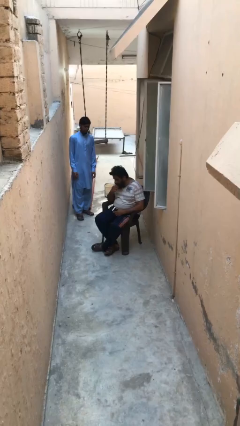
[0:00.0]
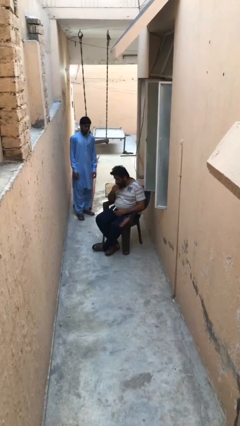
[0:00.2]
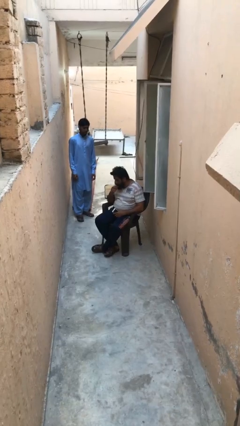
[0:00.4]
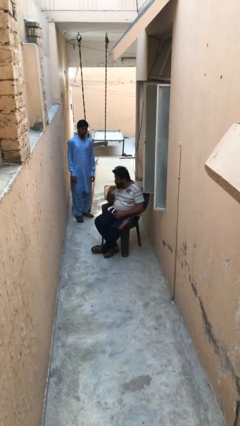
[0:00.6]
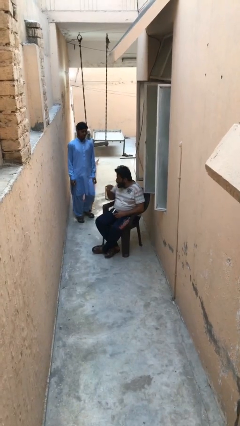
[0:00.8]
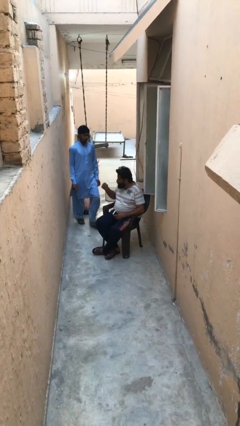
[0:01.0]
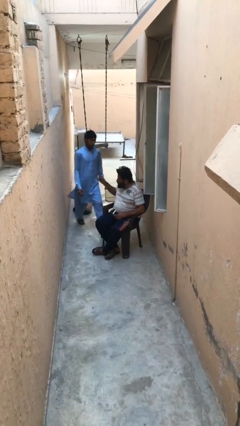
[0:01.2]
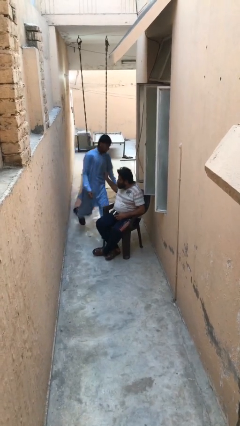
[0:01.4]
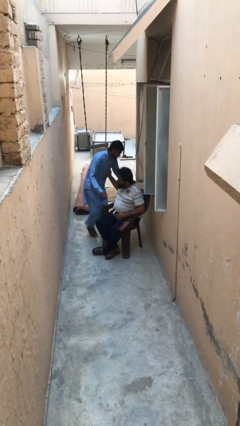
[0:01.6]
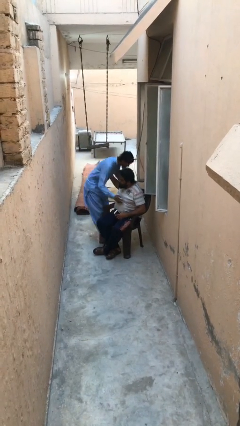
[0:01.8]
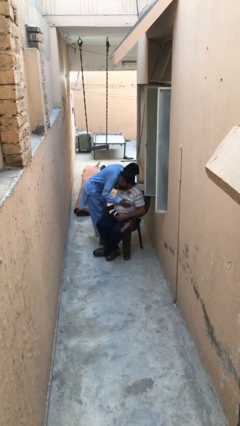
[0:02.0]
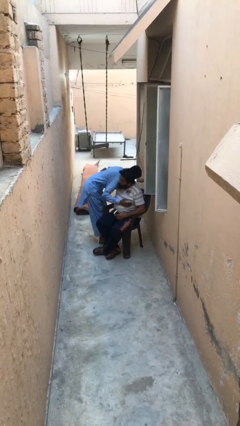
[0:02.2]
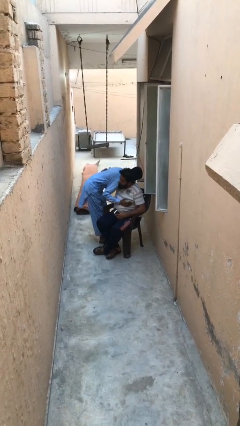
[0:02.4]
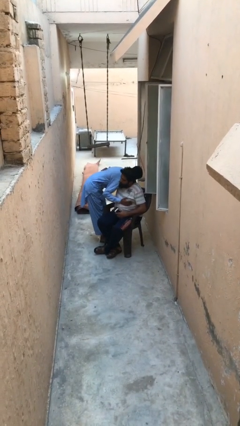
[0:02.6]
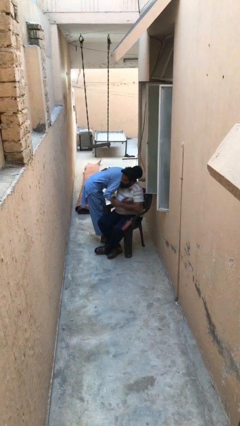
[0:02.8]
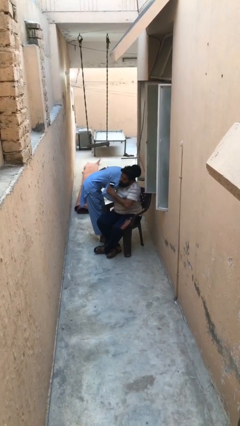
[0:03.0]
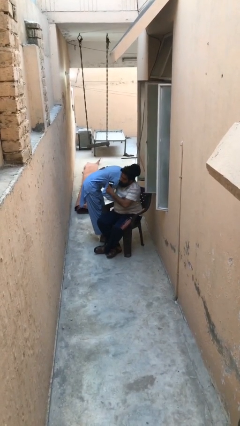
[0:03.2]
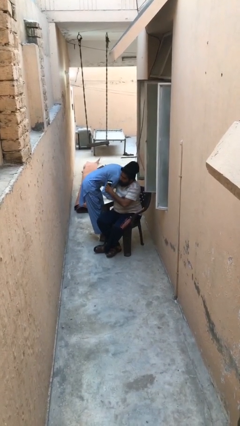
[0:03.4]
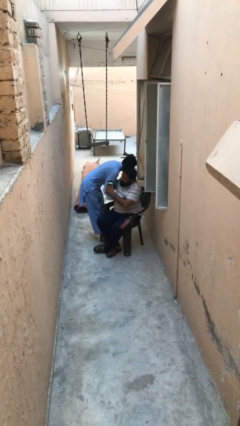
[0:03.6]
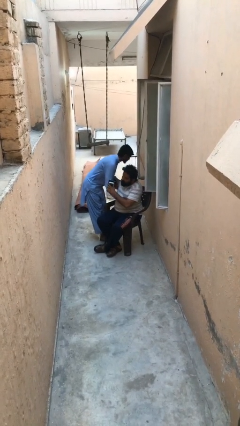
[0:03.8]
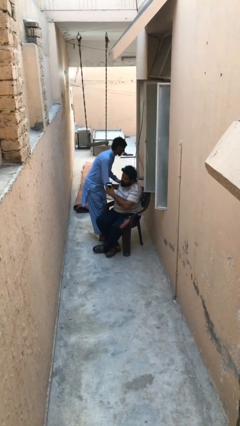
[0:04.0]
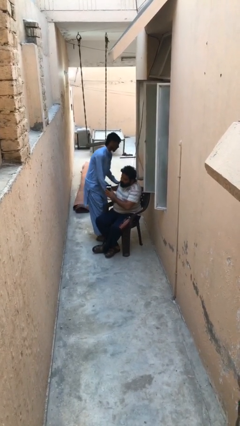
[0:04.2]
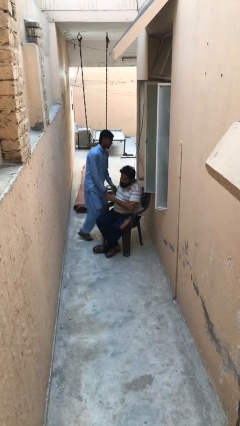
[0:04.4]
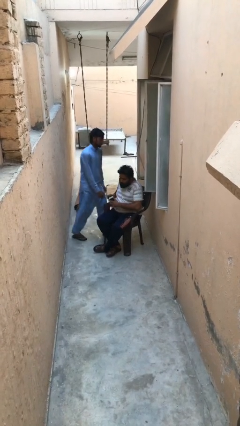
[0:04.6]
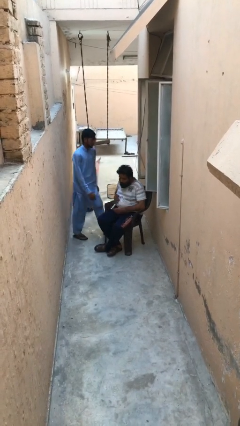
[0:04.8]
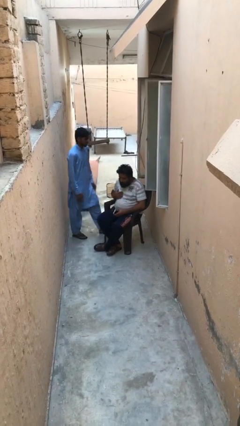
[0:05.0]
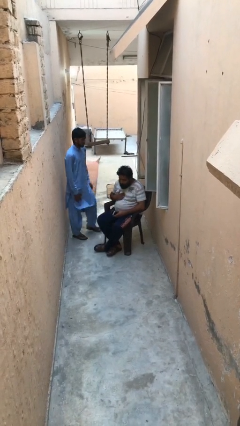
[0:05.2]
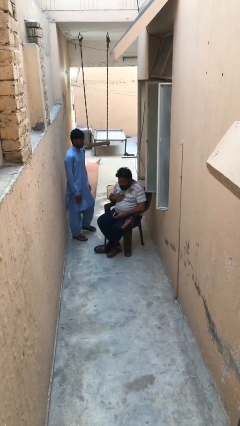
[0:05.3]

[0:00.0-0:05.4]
person embraces person

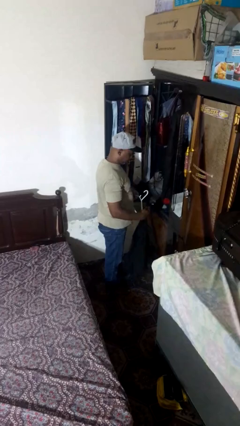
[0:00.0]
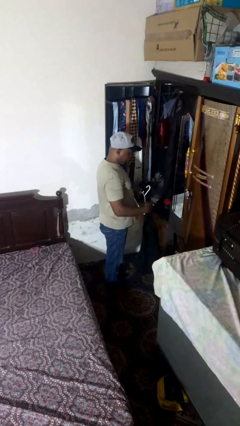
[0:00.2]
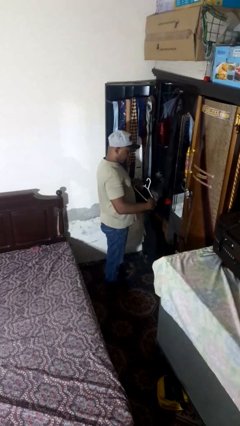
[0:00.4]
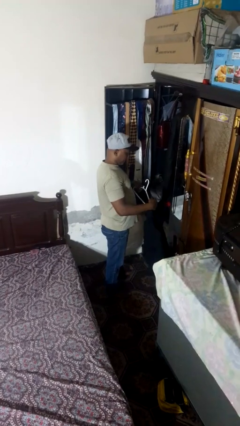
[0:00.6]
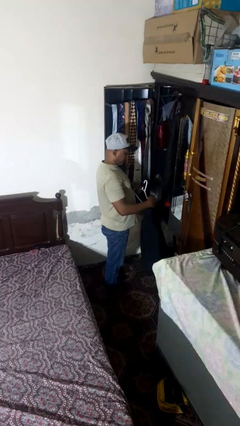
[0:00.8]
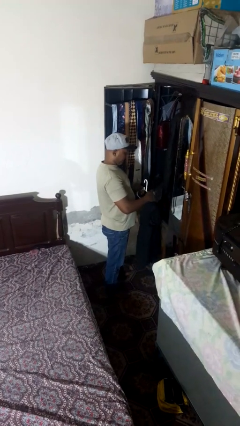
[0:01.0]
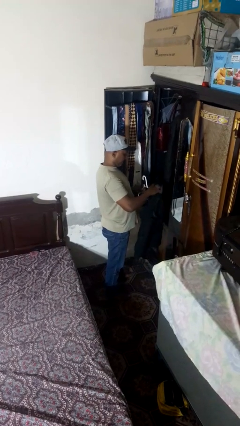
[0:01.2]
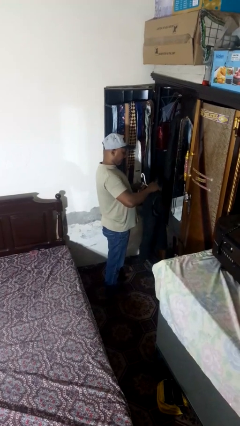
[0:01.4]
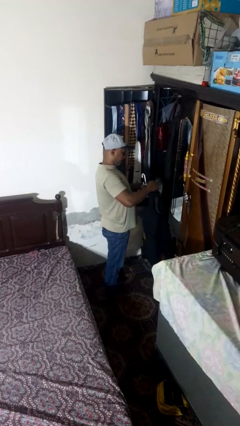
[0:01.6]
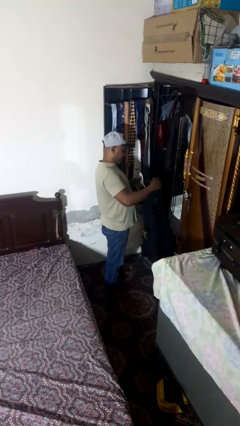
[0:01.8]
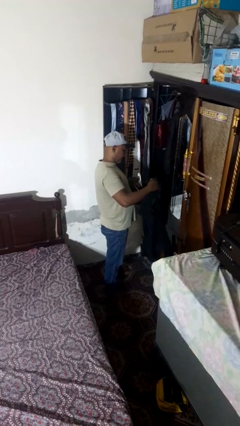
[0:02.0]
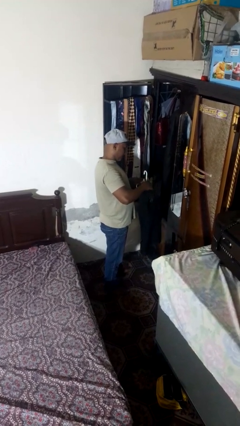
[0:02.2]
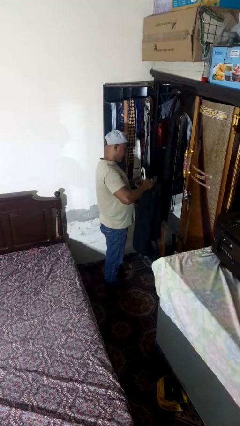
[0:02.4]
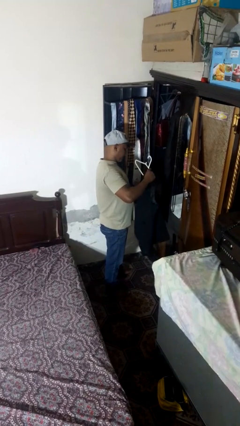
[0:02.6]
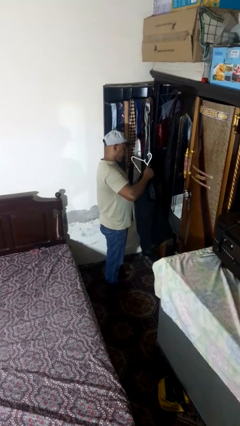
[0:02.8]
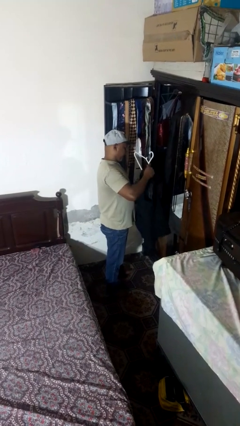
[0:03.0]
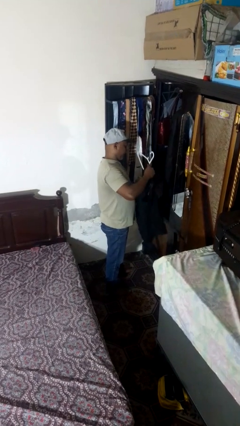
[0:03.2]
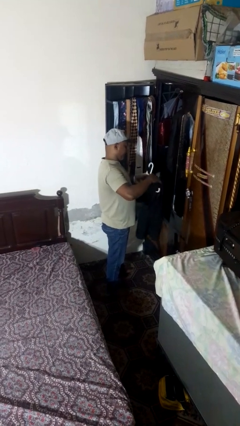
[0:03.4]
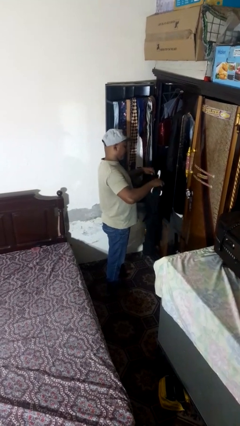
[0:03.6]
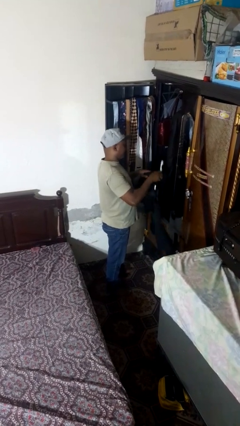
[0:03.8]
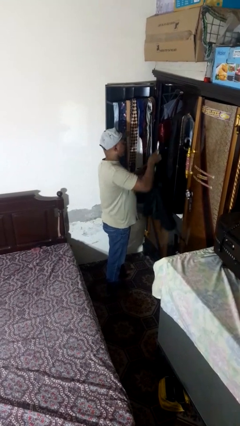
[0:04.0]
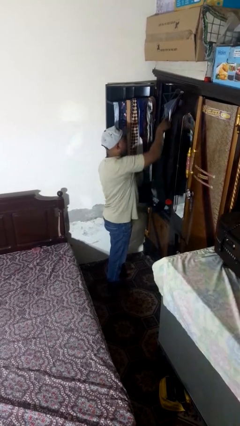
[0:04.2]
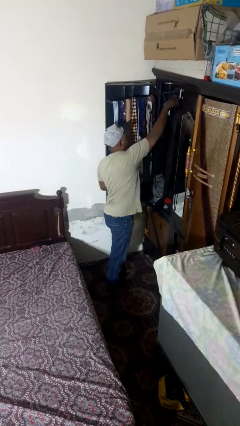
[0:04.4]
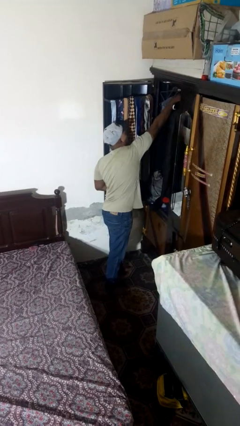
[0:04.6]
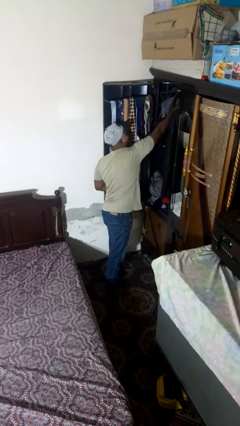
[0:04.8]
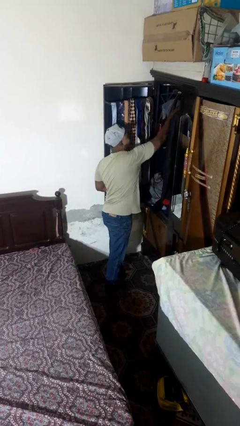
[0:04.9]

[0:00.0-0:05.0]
person puts clothes into closet

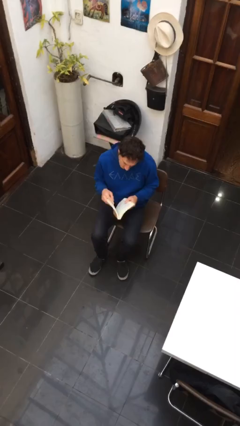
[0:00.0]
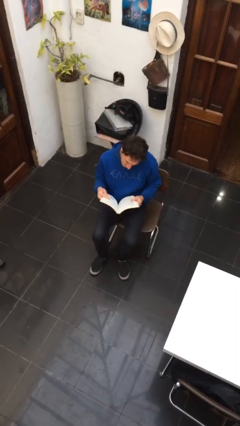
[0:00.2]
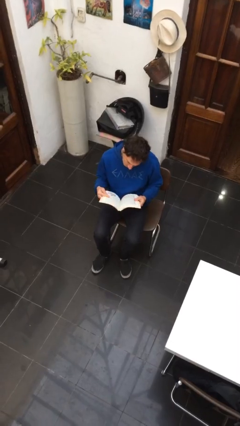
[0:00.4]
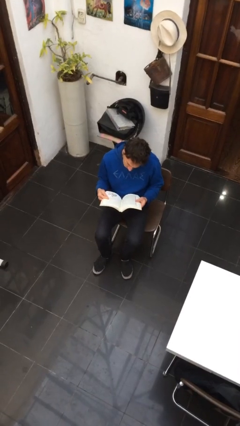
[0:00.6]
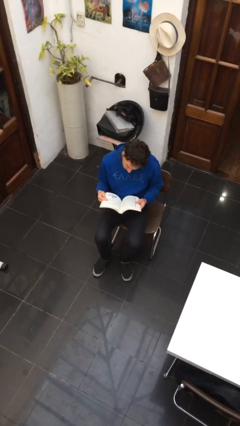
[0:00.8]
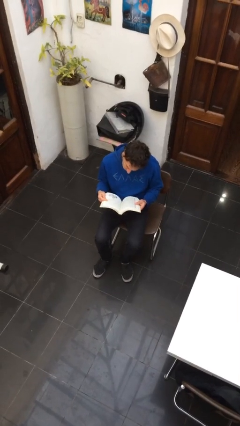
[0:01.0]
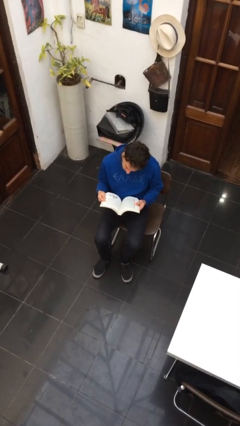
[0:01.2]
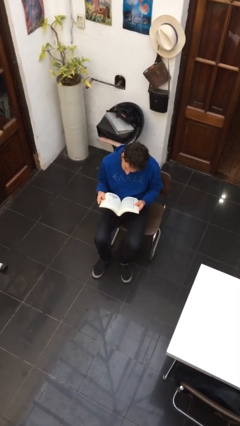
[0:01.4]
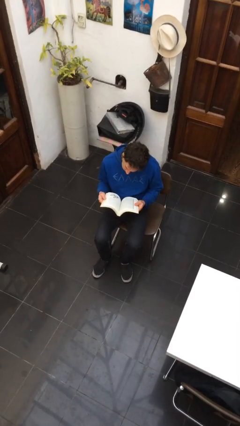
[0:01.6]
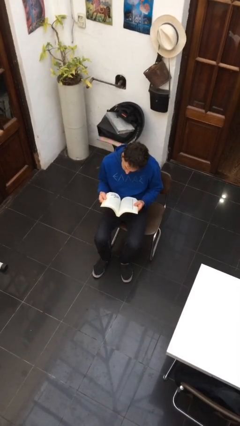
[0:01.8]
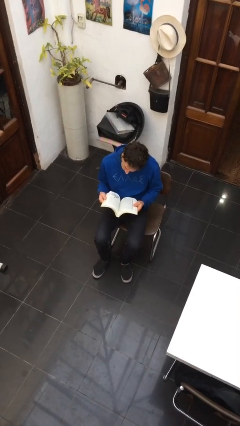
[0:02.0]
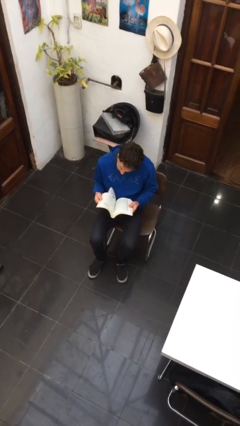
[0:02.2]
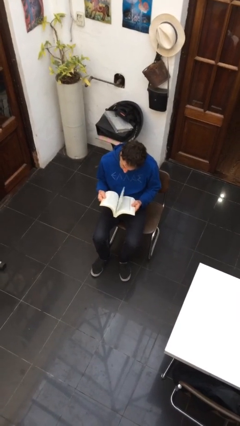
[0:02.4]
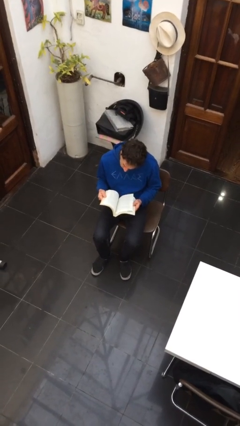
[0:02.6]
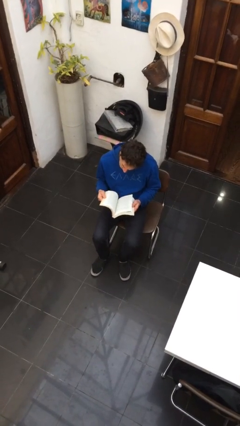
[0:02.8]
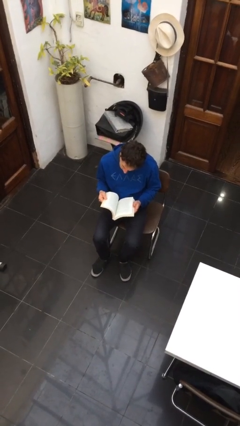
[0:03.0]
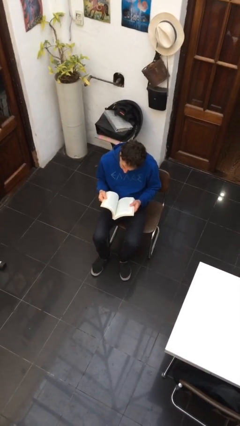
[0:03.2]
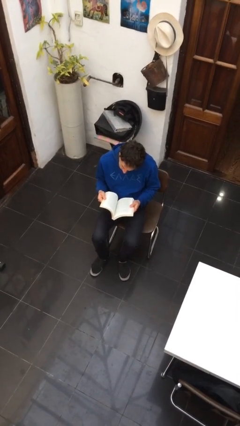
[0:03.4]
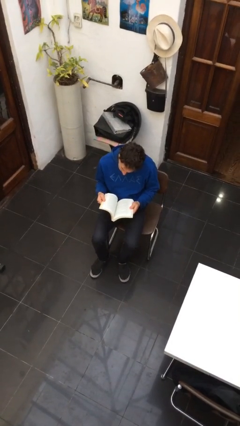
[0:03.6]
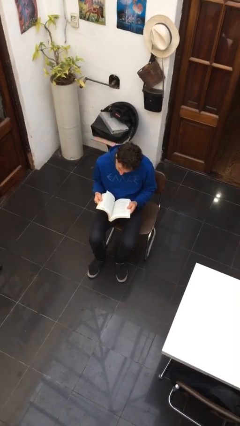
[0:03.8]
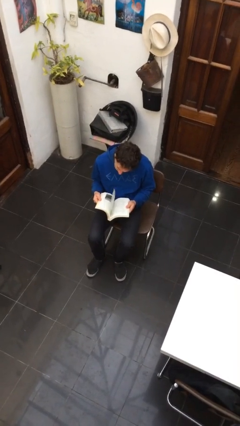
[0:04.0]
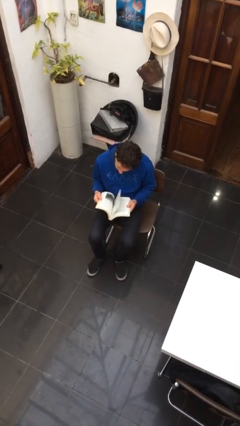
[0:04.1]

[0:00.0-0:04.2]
person reads document

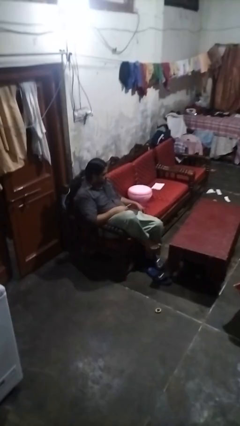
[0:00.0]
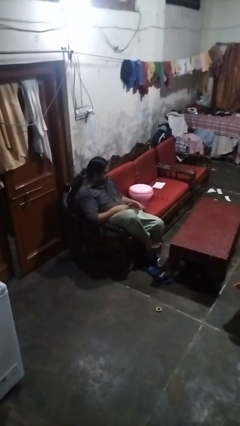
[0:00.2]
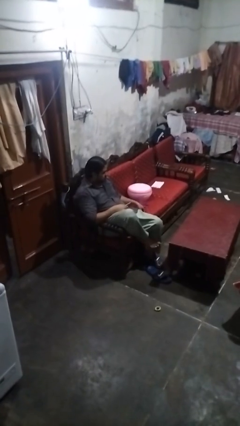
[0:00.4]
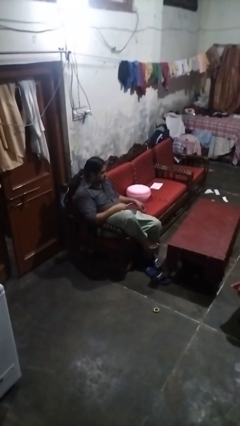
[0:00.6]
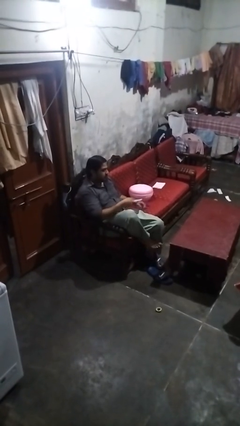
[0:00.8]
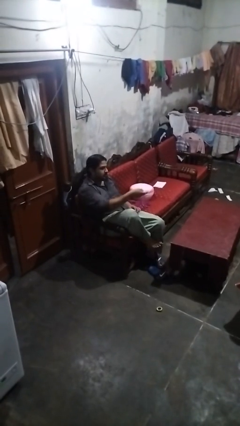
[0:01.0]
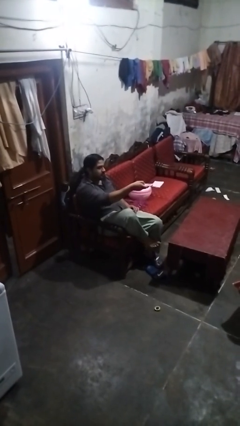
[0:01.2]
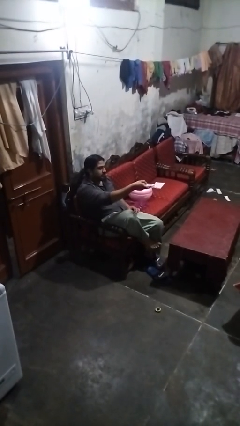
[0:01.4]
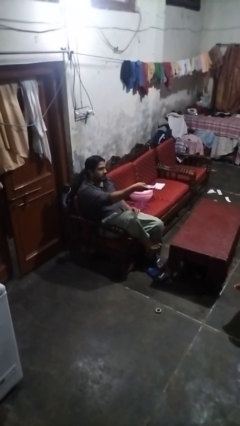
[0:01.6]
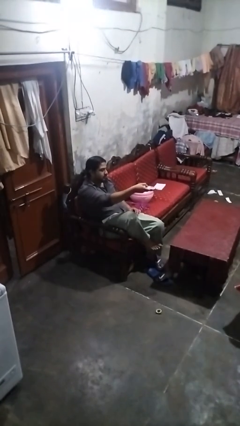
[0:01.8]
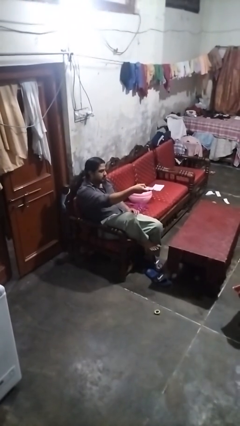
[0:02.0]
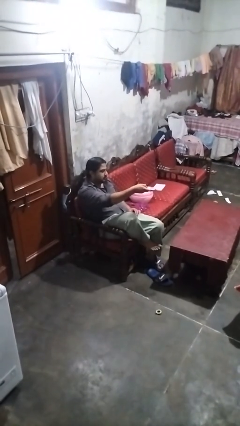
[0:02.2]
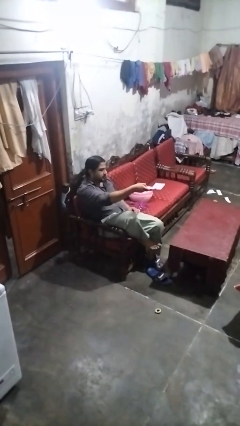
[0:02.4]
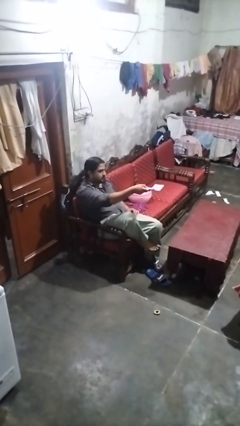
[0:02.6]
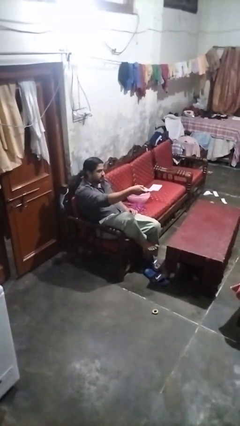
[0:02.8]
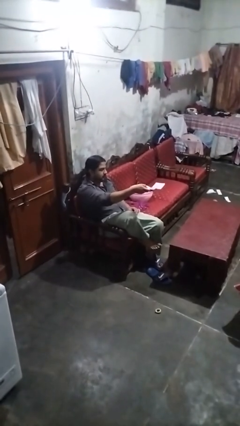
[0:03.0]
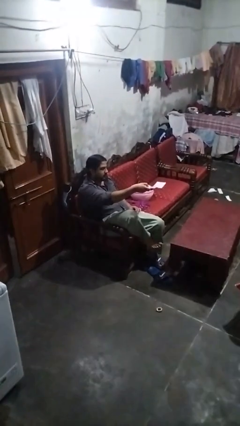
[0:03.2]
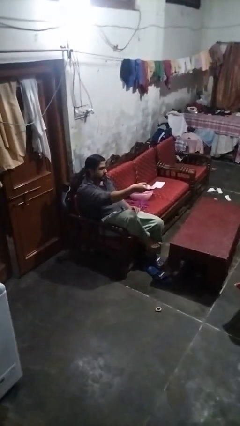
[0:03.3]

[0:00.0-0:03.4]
person uses television remote
